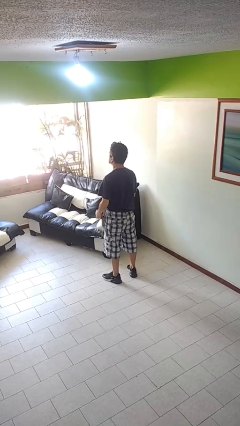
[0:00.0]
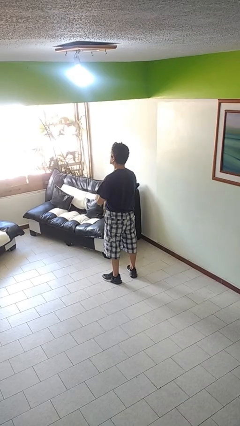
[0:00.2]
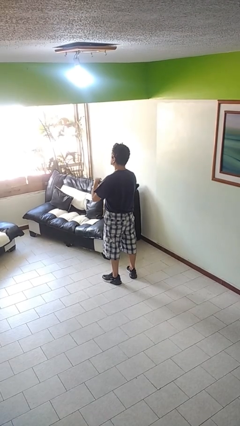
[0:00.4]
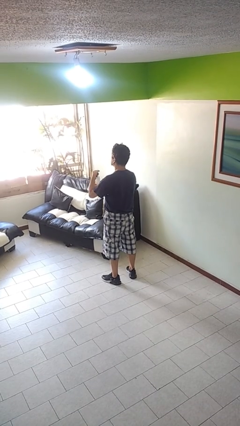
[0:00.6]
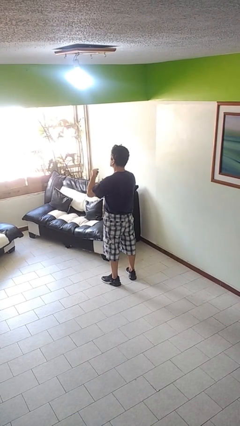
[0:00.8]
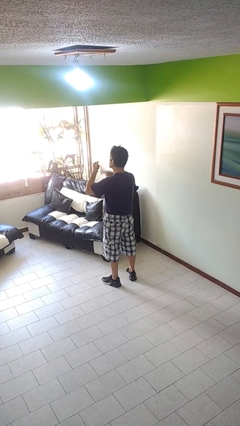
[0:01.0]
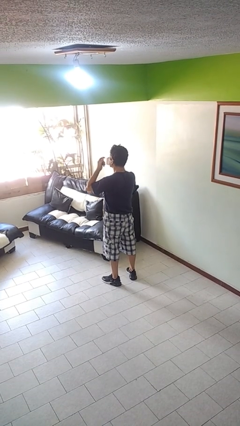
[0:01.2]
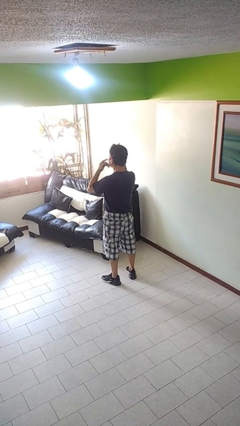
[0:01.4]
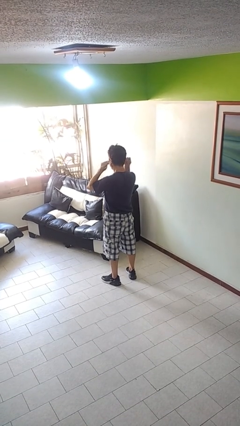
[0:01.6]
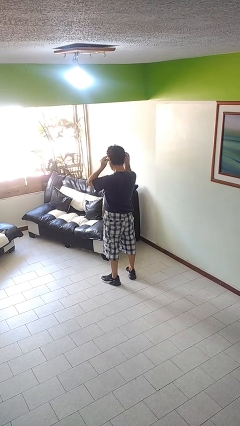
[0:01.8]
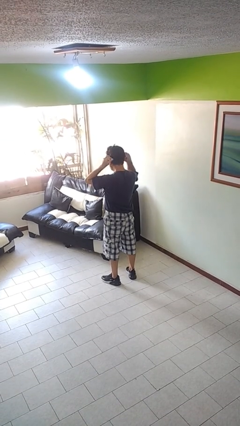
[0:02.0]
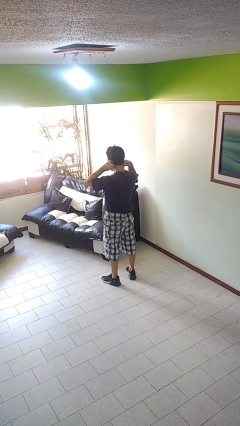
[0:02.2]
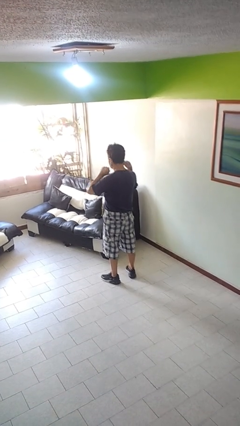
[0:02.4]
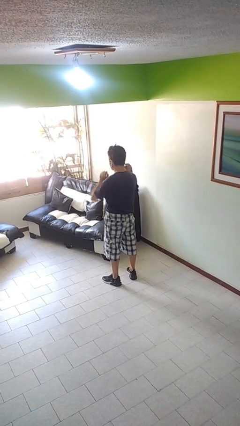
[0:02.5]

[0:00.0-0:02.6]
person puts on facemask

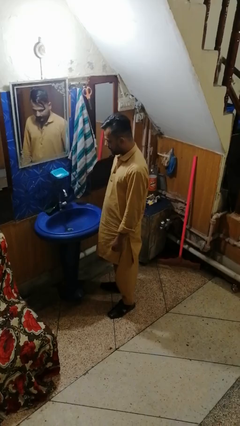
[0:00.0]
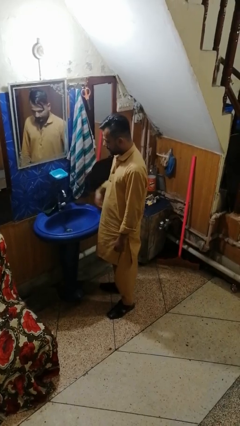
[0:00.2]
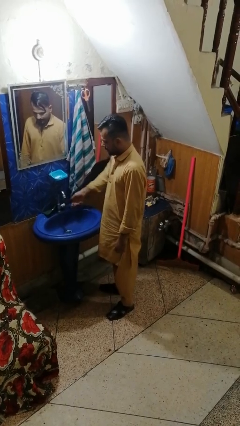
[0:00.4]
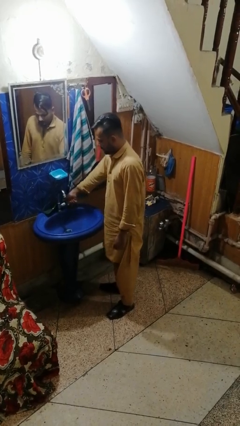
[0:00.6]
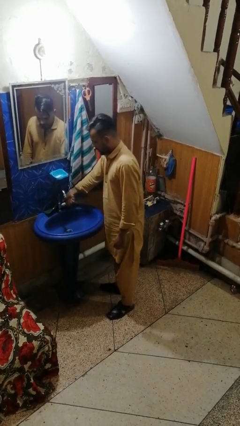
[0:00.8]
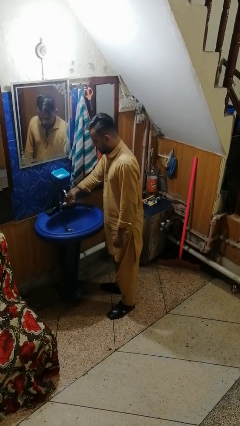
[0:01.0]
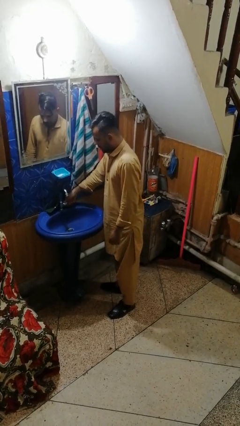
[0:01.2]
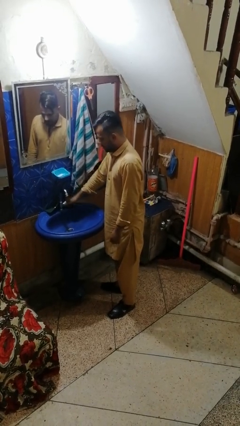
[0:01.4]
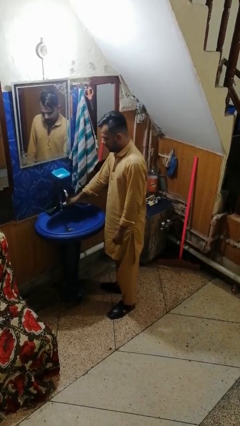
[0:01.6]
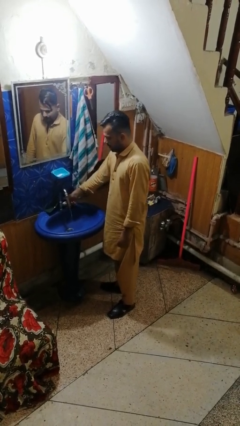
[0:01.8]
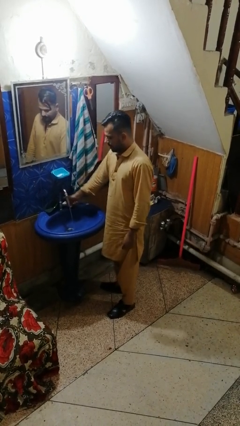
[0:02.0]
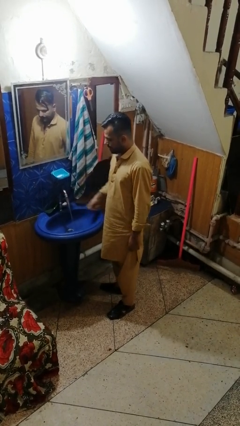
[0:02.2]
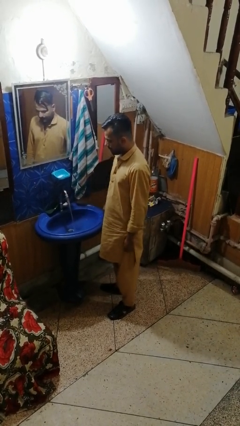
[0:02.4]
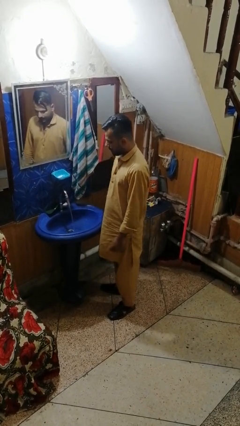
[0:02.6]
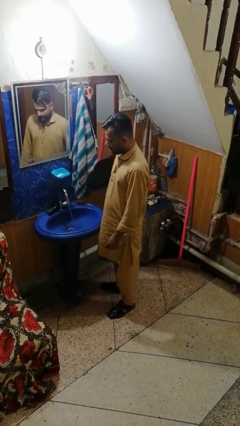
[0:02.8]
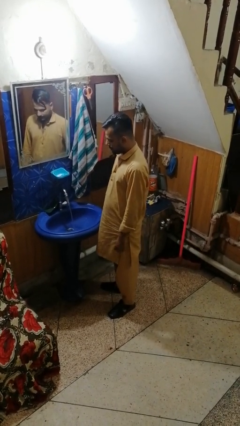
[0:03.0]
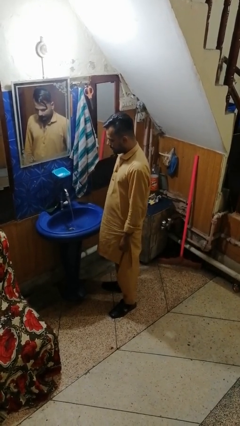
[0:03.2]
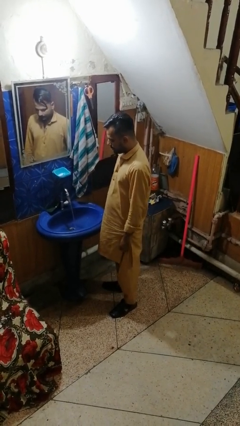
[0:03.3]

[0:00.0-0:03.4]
person turns on faucet

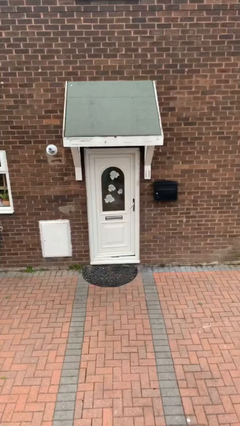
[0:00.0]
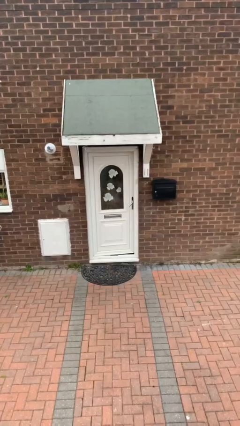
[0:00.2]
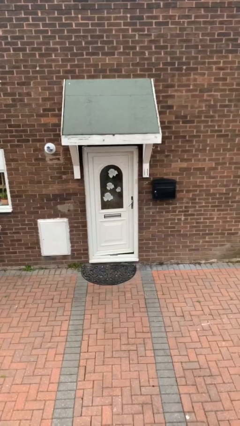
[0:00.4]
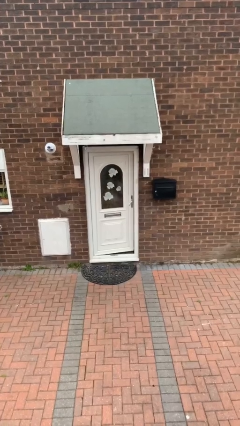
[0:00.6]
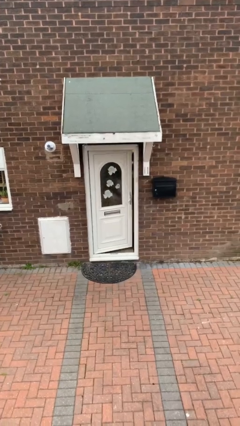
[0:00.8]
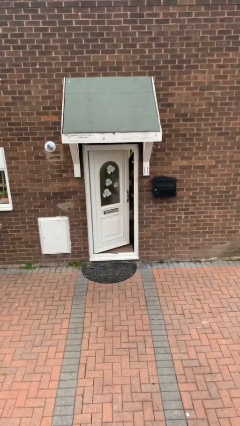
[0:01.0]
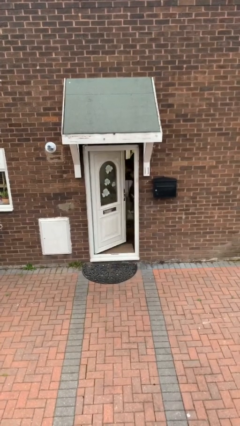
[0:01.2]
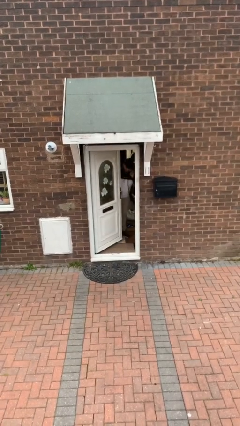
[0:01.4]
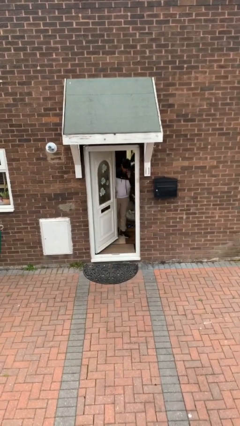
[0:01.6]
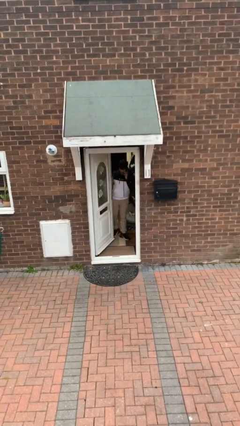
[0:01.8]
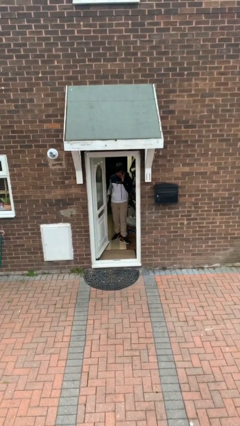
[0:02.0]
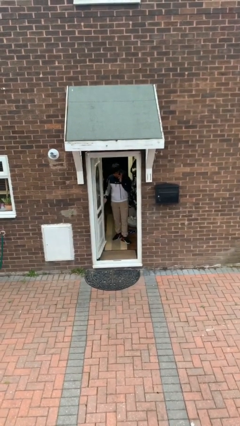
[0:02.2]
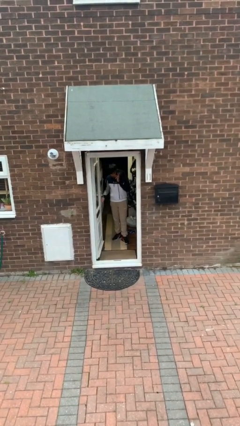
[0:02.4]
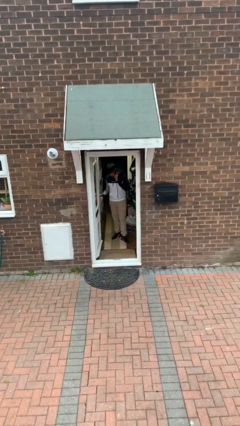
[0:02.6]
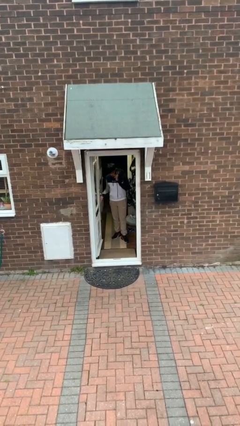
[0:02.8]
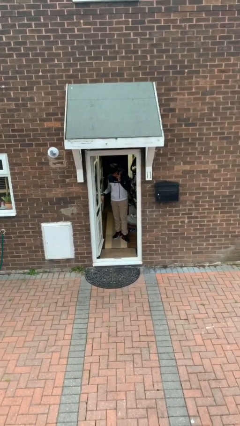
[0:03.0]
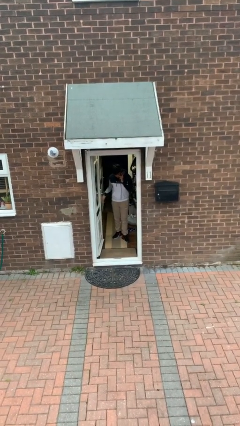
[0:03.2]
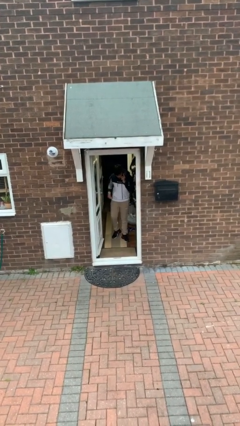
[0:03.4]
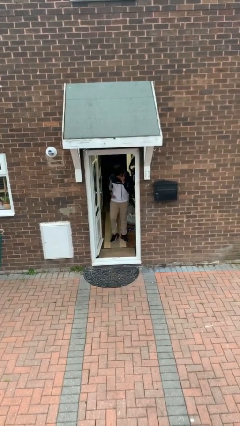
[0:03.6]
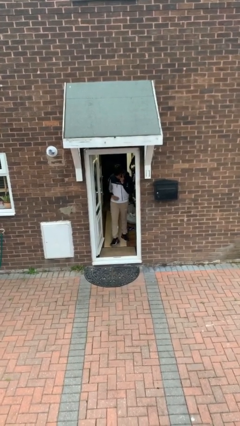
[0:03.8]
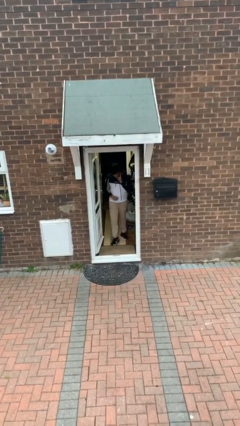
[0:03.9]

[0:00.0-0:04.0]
person opens facility door

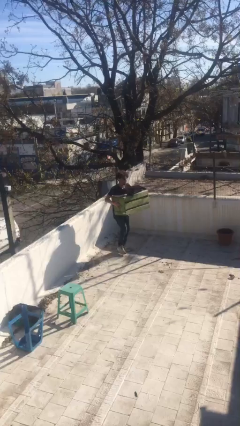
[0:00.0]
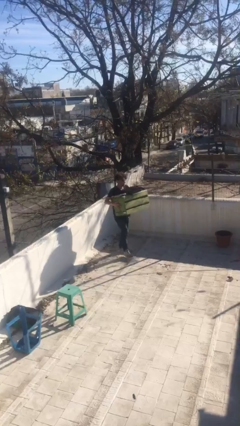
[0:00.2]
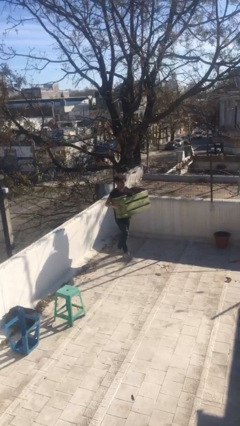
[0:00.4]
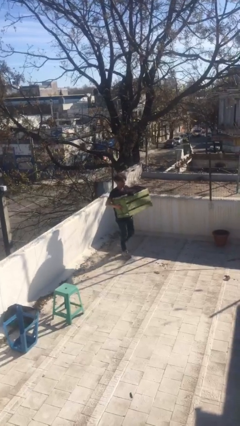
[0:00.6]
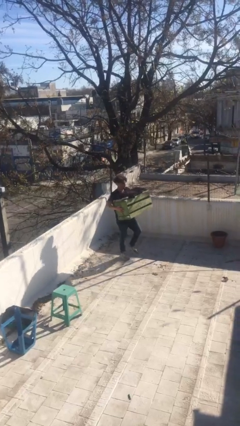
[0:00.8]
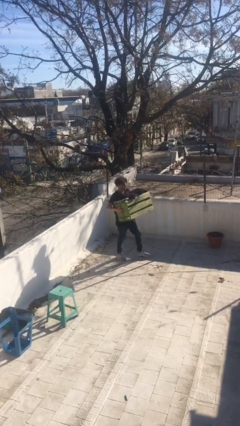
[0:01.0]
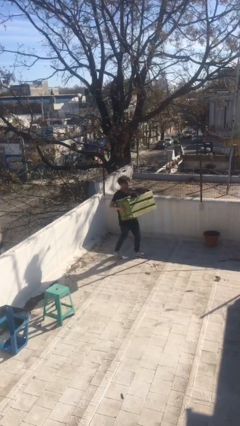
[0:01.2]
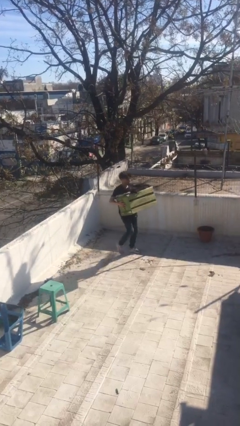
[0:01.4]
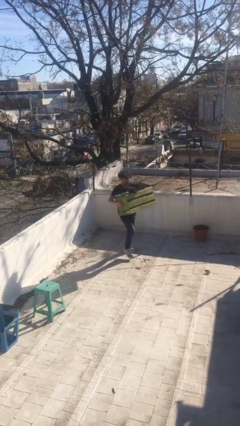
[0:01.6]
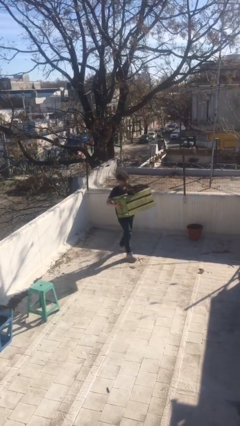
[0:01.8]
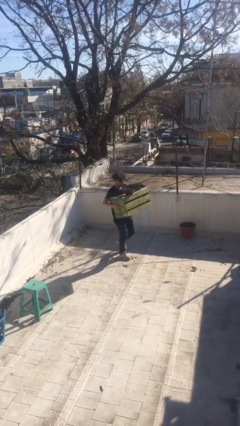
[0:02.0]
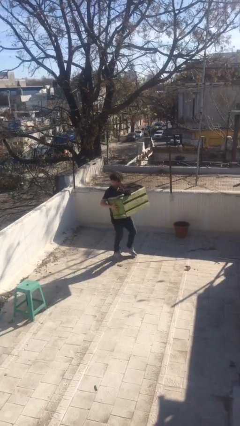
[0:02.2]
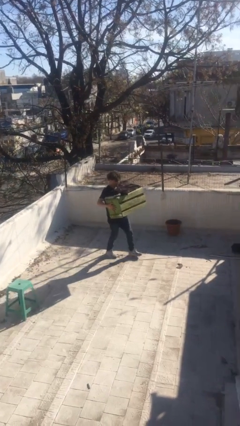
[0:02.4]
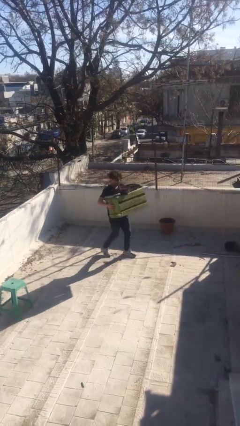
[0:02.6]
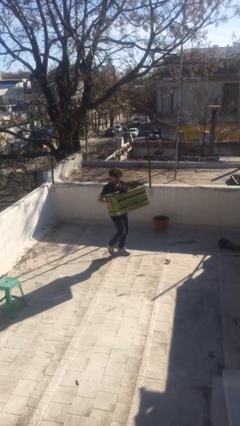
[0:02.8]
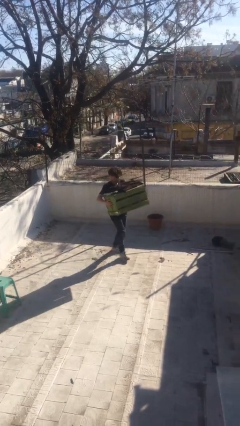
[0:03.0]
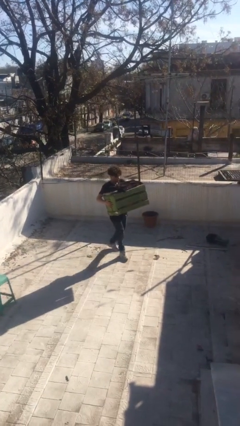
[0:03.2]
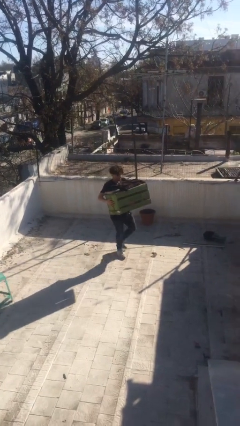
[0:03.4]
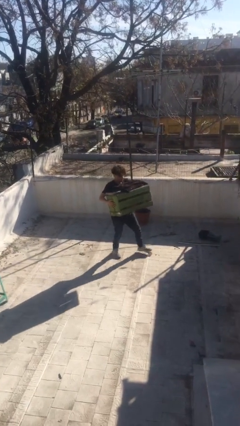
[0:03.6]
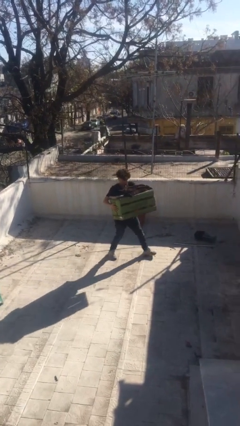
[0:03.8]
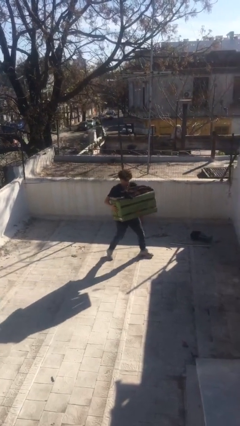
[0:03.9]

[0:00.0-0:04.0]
person carries heavy object

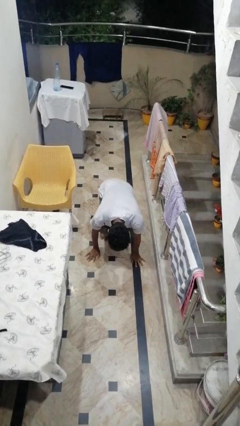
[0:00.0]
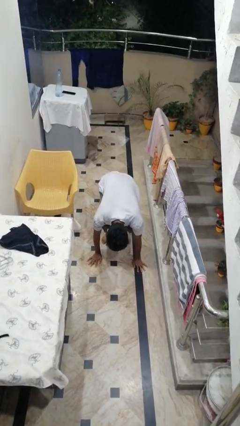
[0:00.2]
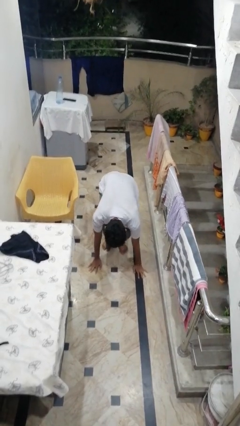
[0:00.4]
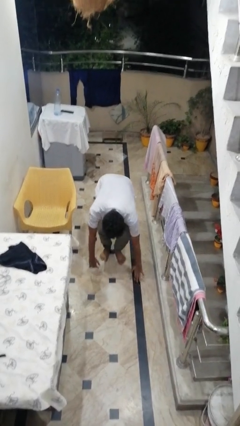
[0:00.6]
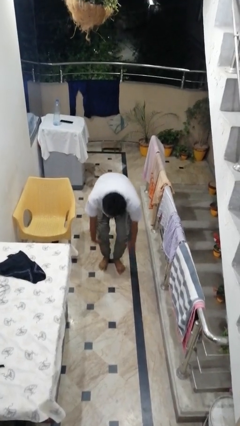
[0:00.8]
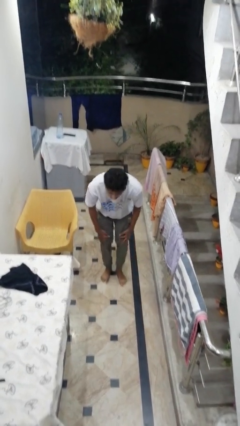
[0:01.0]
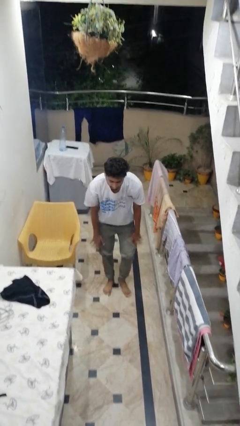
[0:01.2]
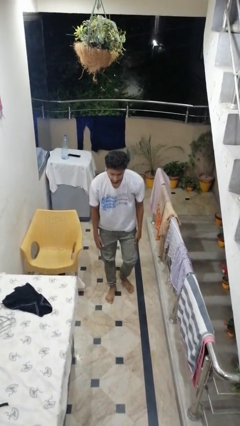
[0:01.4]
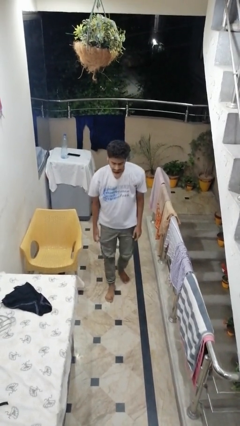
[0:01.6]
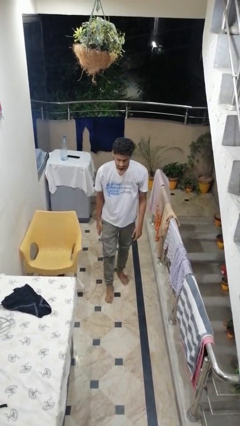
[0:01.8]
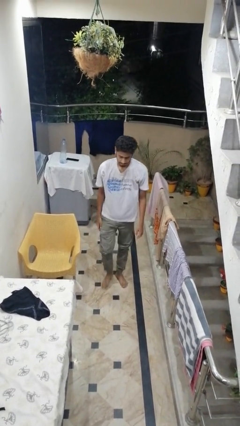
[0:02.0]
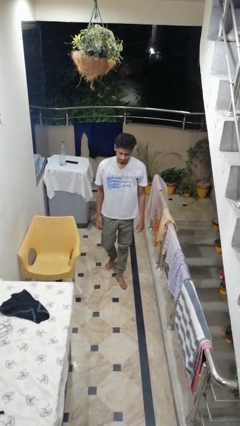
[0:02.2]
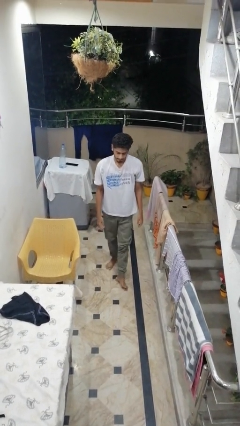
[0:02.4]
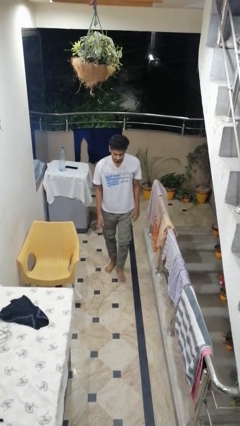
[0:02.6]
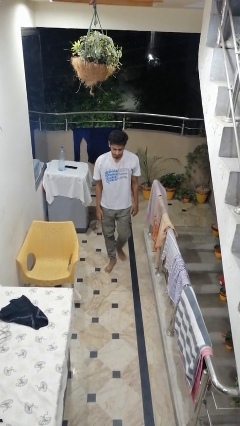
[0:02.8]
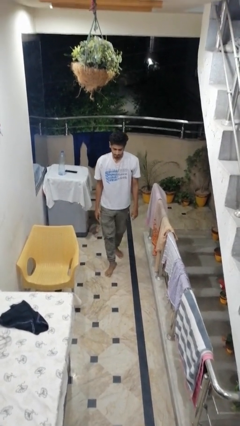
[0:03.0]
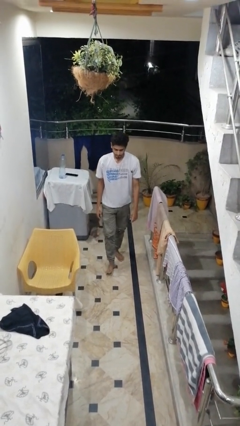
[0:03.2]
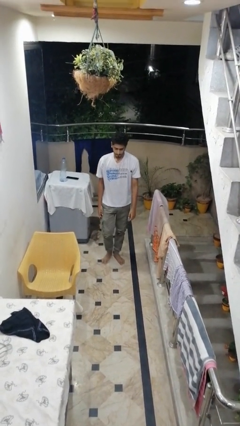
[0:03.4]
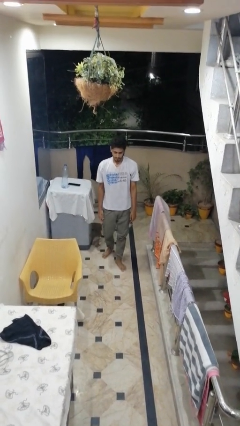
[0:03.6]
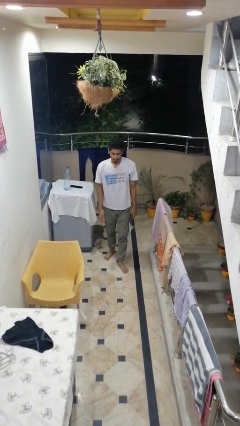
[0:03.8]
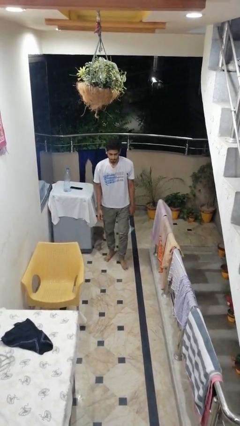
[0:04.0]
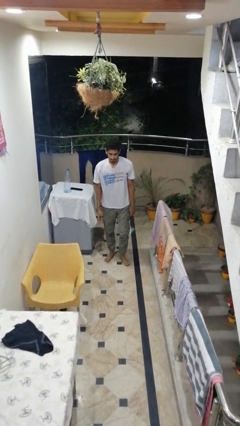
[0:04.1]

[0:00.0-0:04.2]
person stands up from floor
